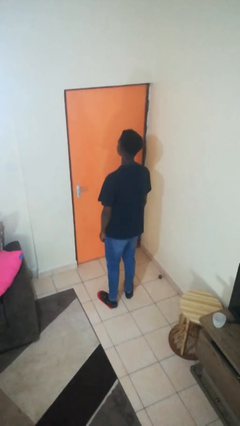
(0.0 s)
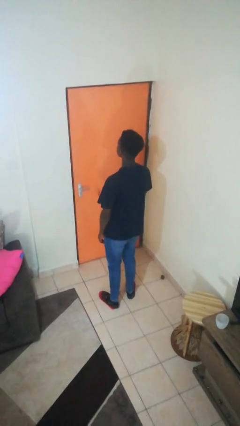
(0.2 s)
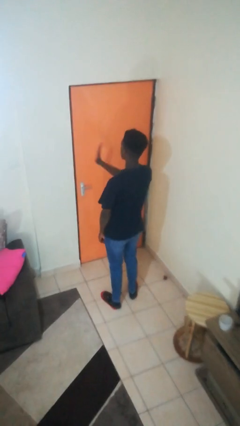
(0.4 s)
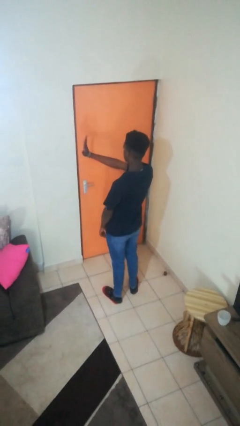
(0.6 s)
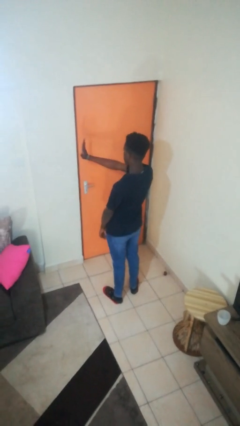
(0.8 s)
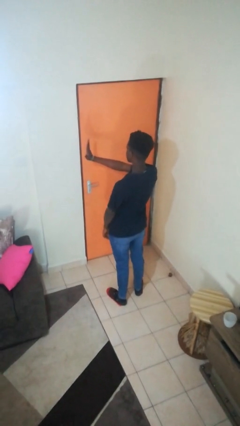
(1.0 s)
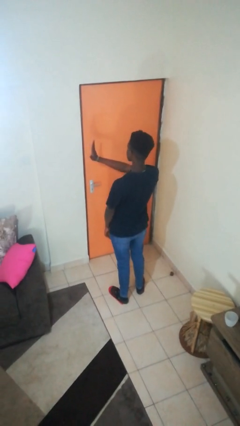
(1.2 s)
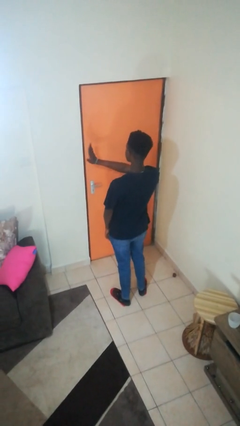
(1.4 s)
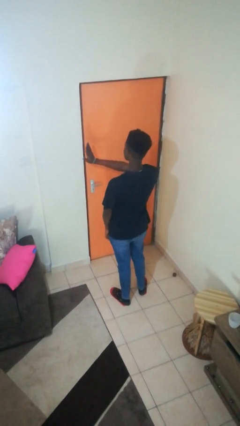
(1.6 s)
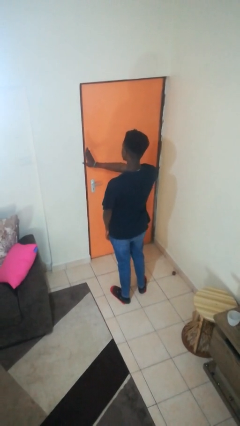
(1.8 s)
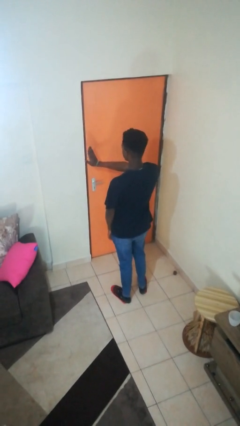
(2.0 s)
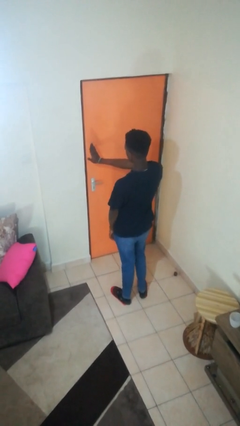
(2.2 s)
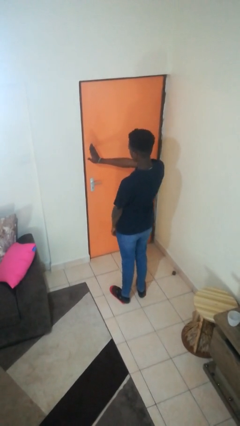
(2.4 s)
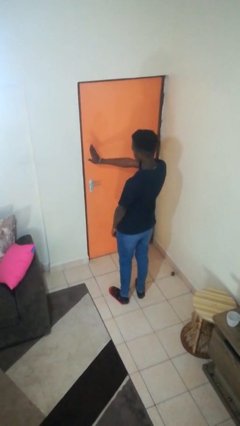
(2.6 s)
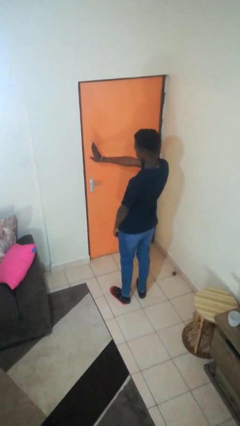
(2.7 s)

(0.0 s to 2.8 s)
person gestures stop

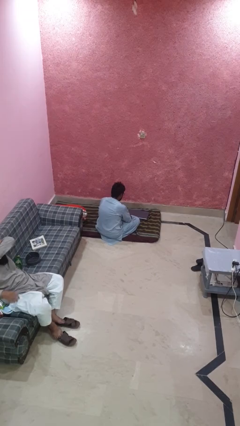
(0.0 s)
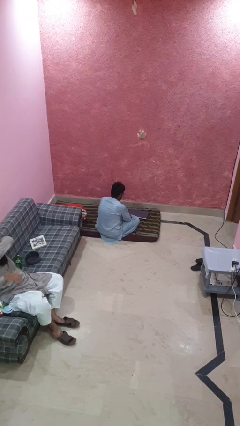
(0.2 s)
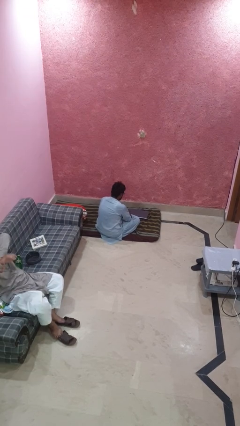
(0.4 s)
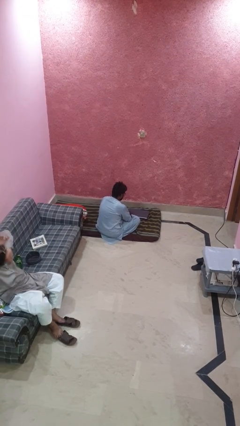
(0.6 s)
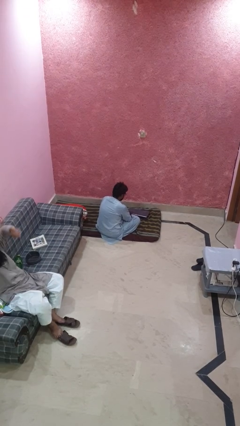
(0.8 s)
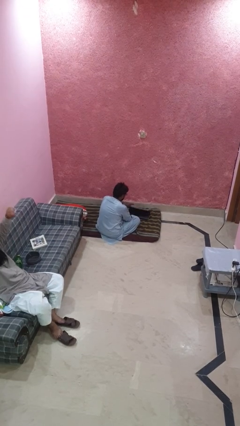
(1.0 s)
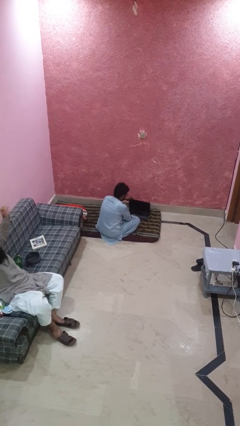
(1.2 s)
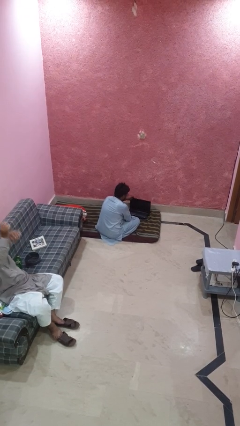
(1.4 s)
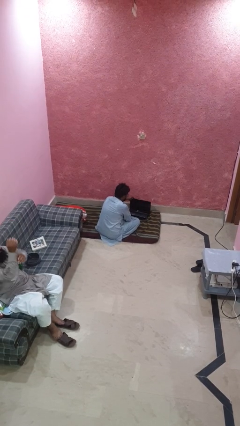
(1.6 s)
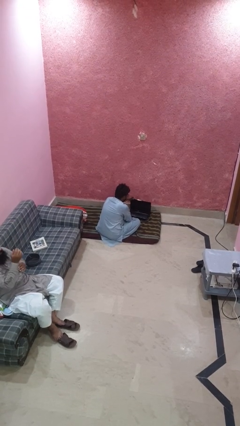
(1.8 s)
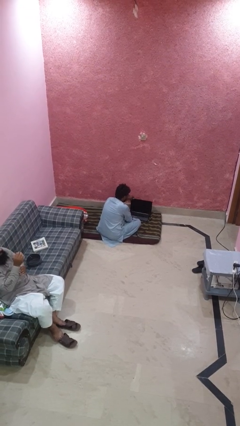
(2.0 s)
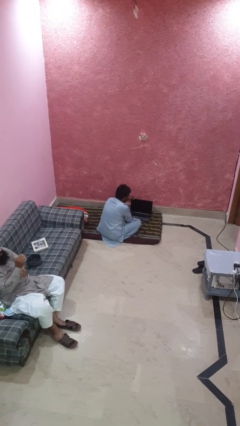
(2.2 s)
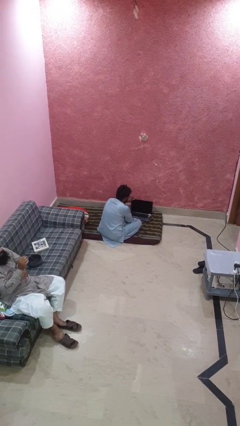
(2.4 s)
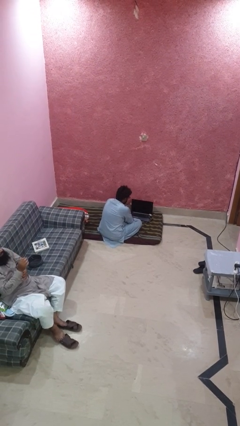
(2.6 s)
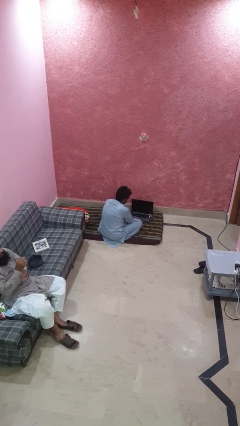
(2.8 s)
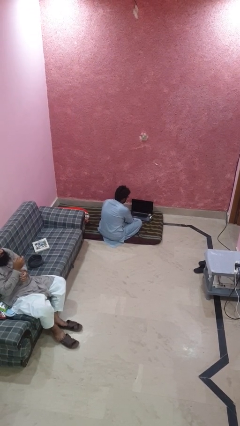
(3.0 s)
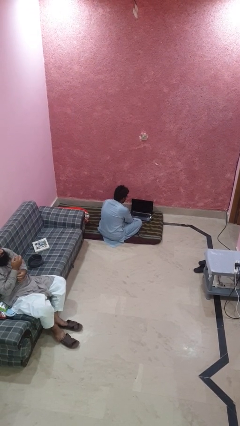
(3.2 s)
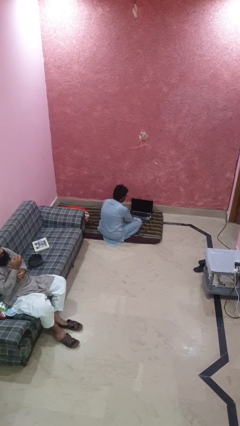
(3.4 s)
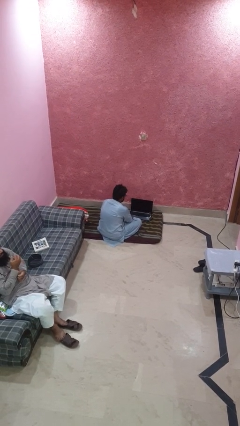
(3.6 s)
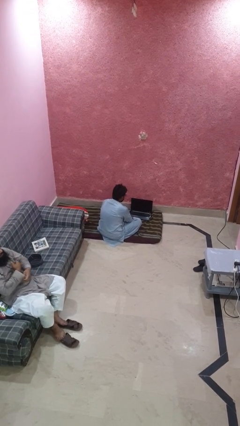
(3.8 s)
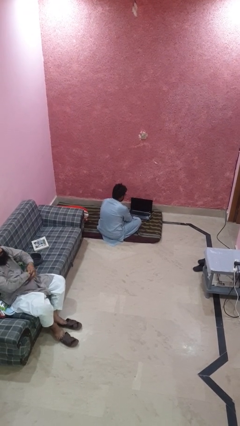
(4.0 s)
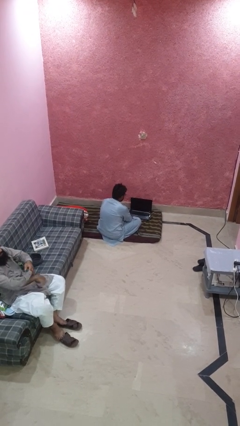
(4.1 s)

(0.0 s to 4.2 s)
person opens laptop

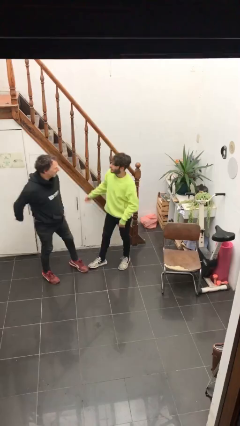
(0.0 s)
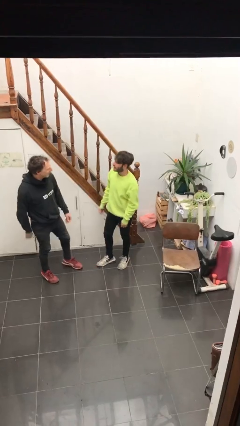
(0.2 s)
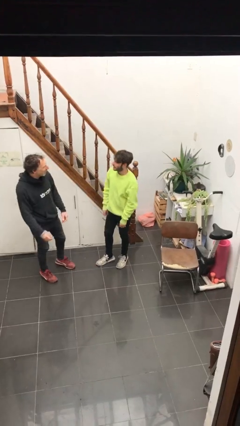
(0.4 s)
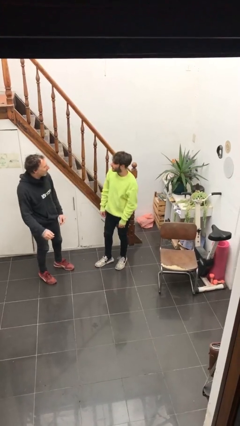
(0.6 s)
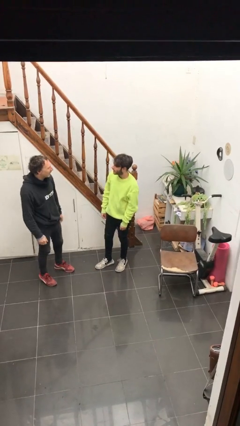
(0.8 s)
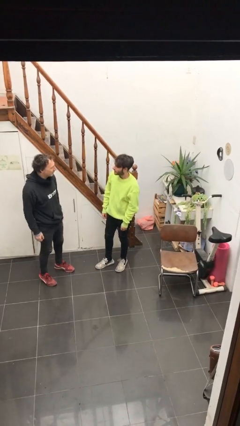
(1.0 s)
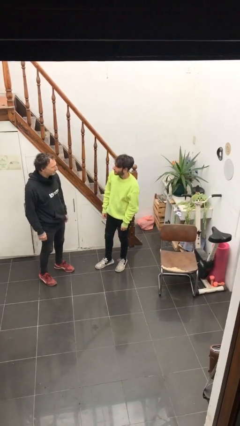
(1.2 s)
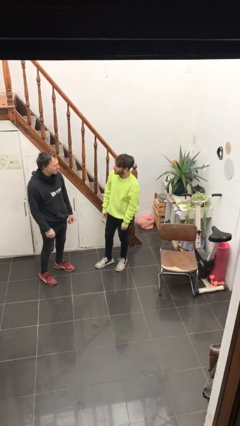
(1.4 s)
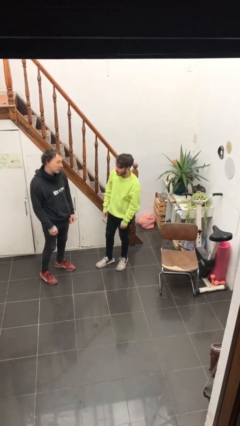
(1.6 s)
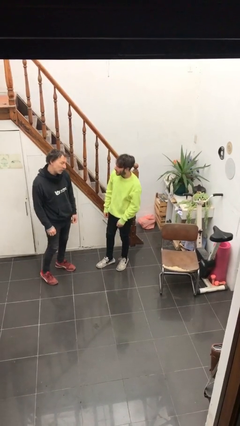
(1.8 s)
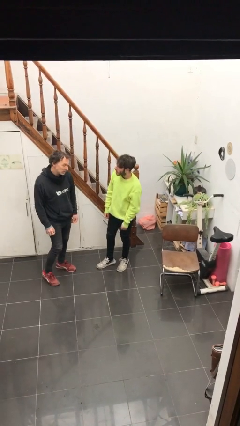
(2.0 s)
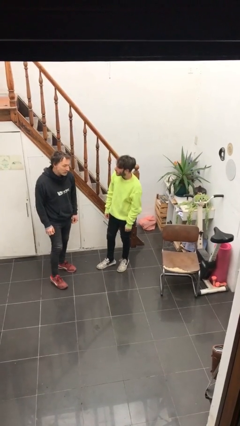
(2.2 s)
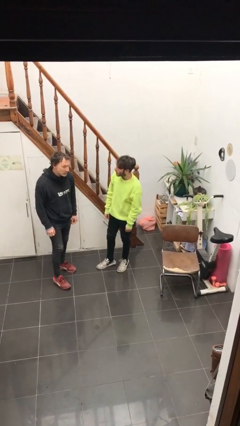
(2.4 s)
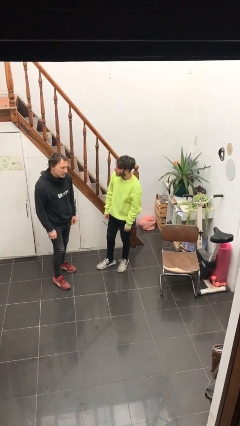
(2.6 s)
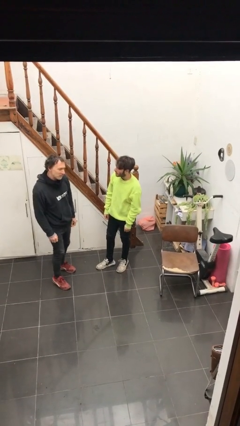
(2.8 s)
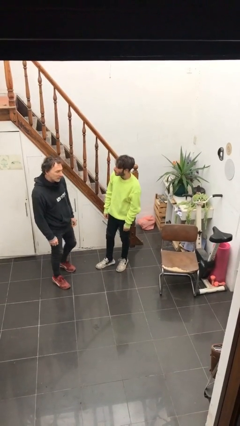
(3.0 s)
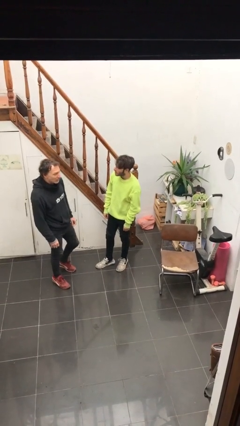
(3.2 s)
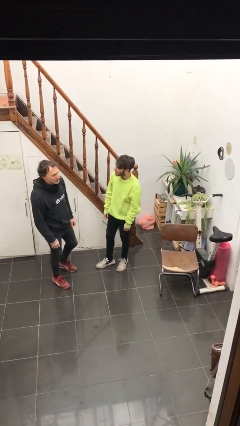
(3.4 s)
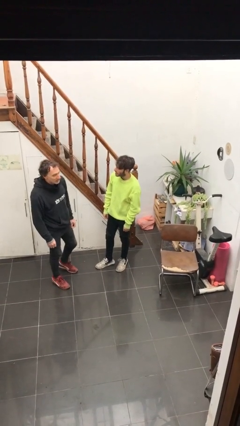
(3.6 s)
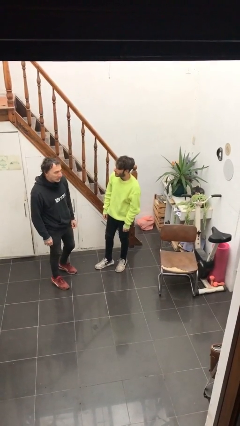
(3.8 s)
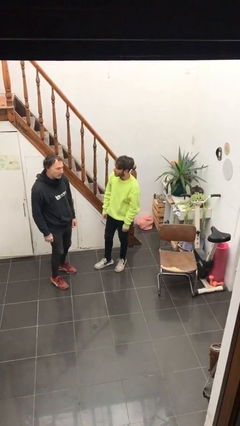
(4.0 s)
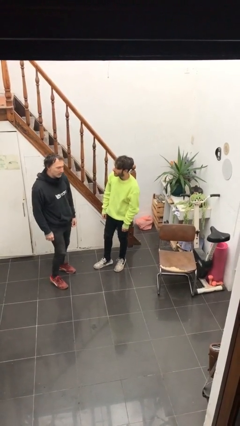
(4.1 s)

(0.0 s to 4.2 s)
person talks to person

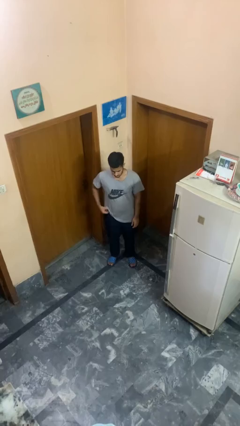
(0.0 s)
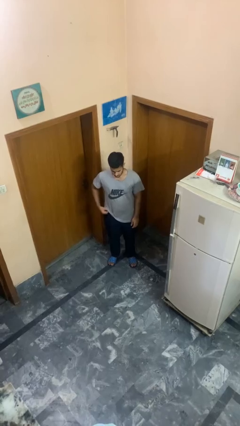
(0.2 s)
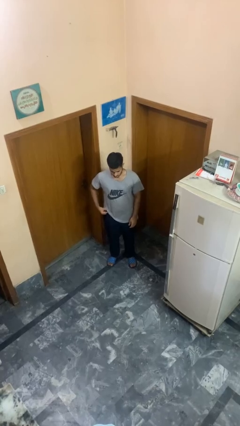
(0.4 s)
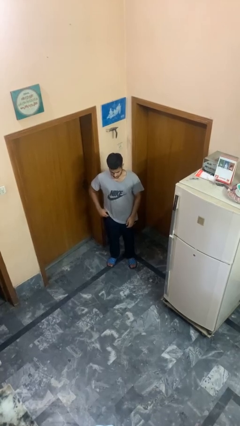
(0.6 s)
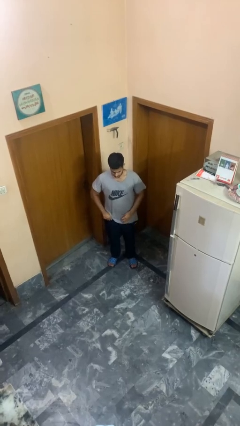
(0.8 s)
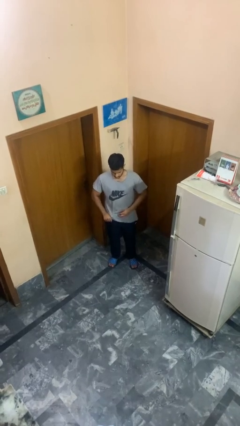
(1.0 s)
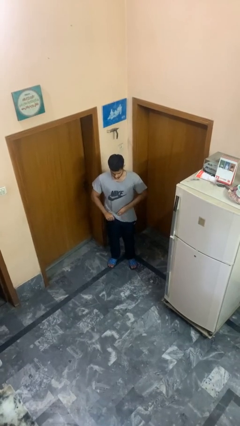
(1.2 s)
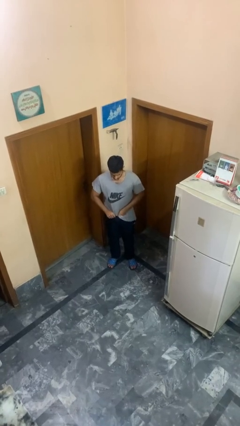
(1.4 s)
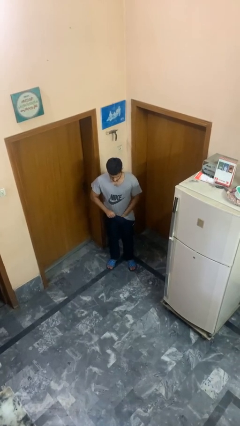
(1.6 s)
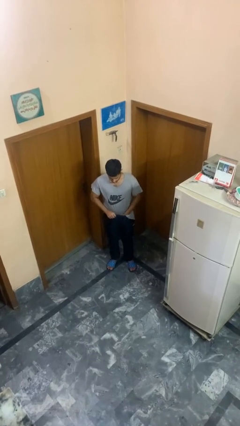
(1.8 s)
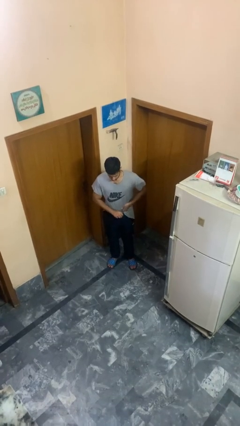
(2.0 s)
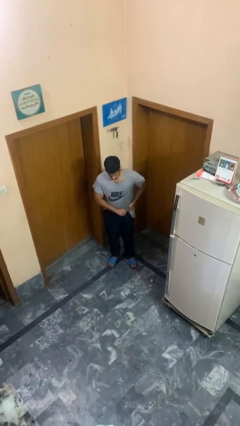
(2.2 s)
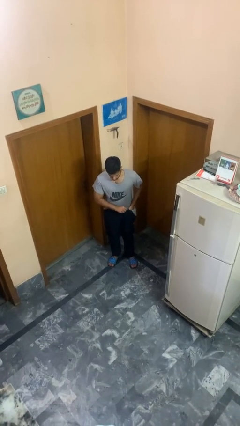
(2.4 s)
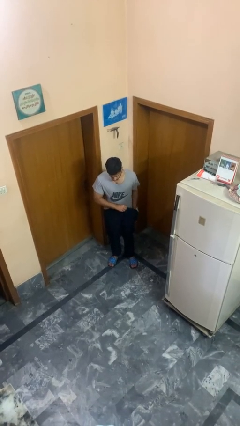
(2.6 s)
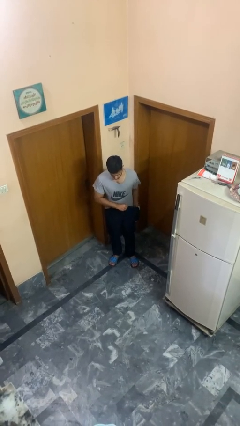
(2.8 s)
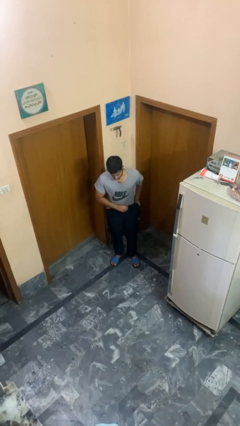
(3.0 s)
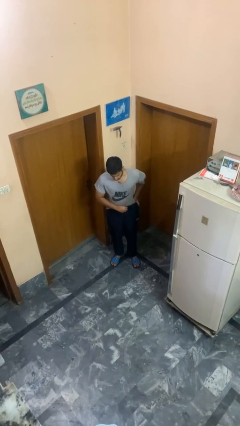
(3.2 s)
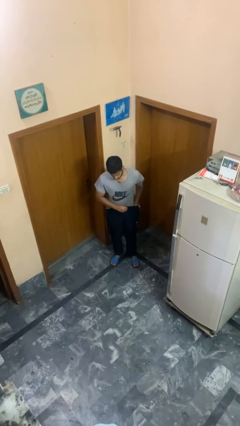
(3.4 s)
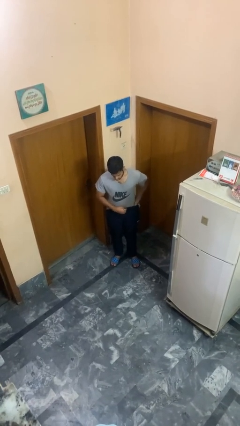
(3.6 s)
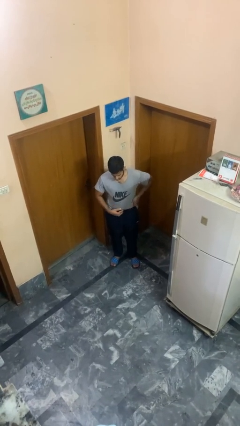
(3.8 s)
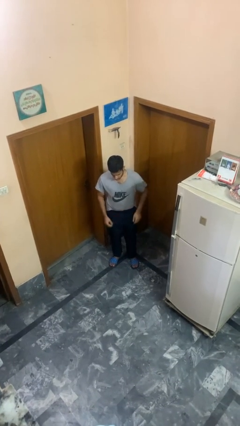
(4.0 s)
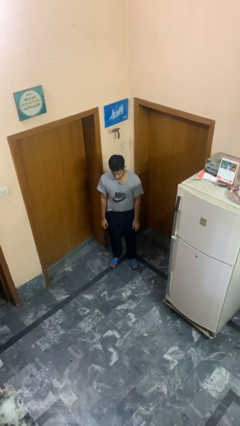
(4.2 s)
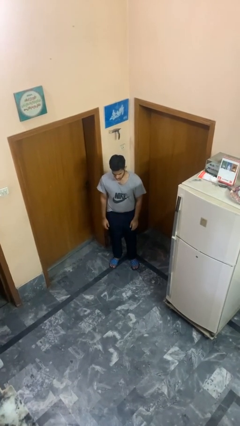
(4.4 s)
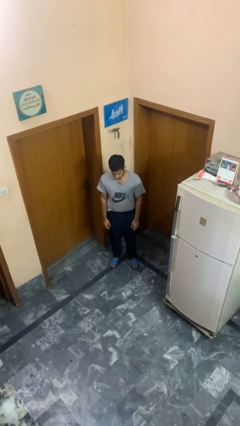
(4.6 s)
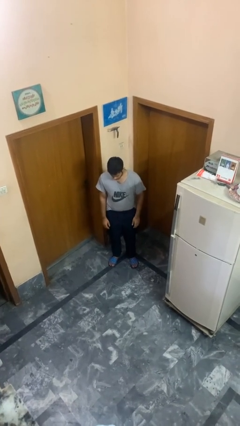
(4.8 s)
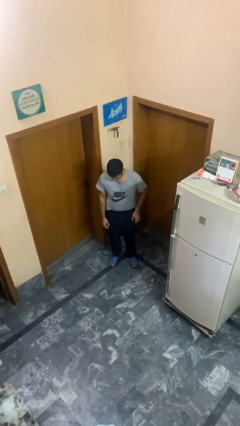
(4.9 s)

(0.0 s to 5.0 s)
person tucks in shirt

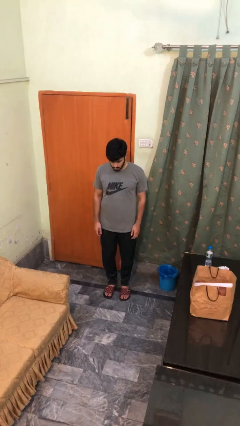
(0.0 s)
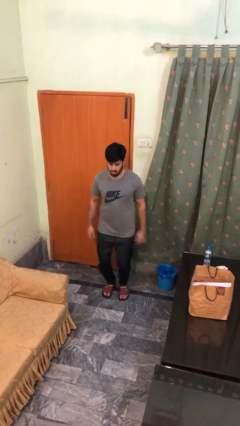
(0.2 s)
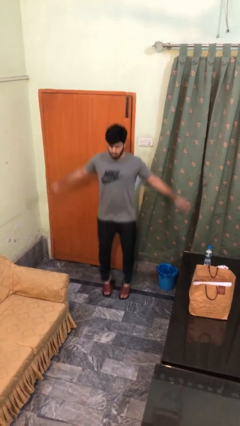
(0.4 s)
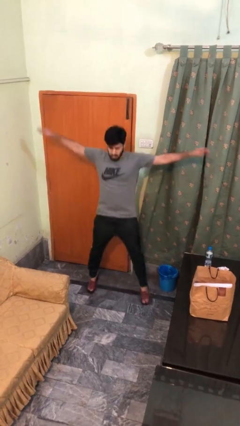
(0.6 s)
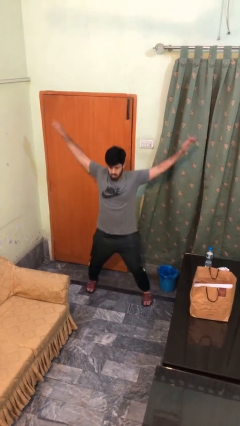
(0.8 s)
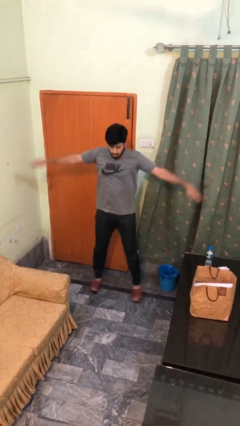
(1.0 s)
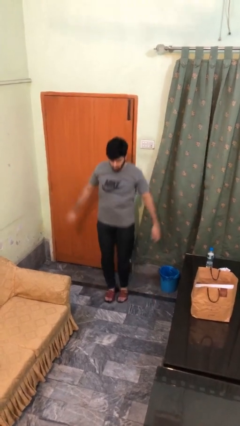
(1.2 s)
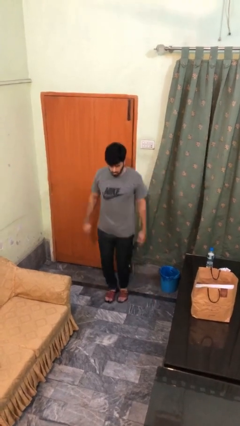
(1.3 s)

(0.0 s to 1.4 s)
person exercises with jumping jacks
